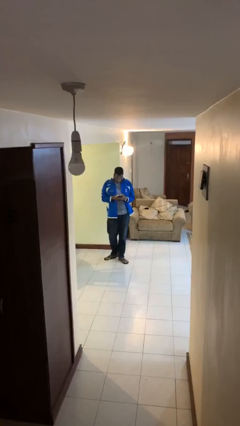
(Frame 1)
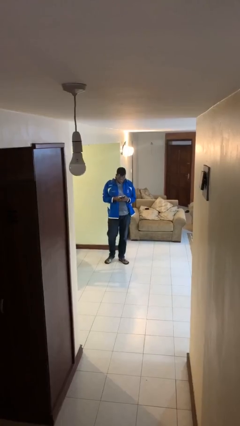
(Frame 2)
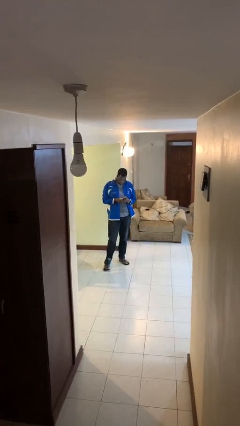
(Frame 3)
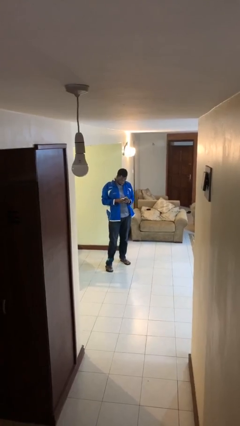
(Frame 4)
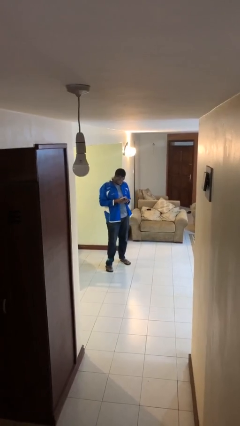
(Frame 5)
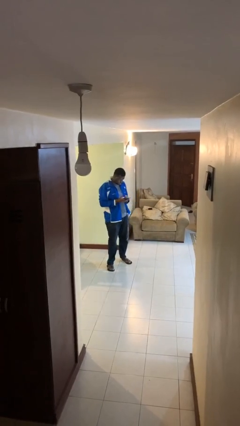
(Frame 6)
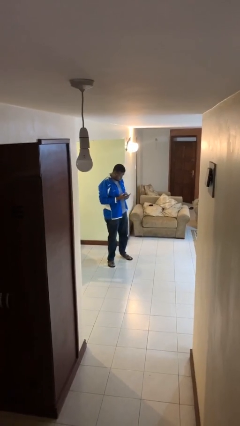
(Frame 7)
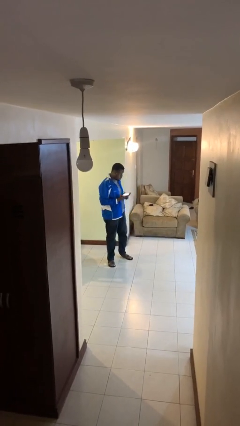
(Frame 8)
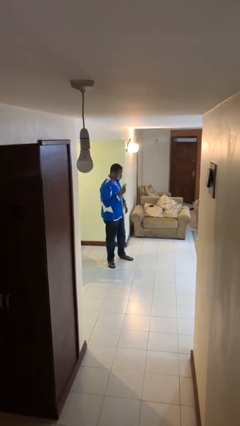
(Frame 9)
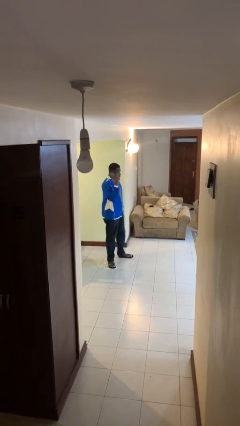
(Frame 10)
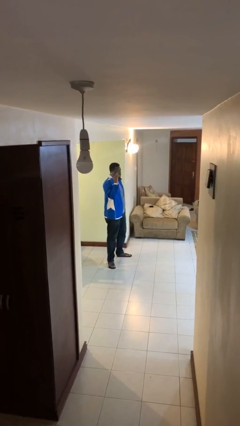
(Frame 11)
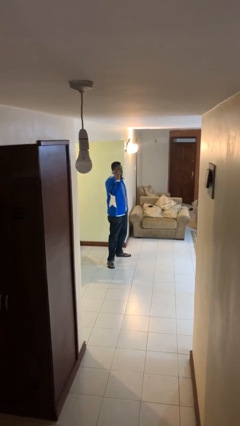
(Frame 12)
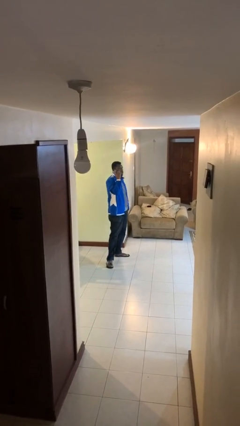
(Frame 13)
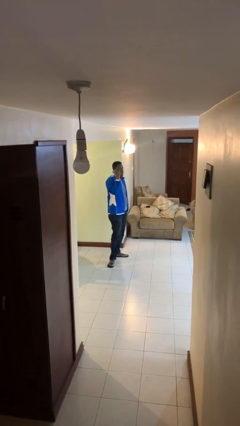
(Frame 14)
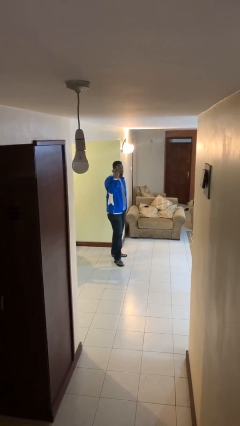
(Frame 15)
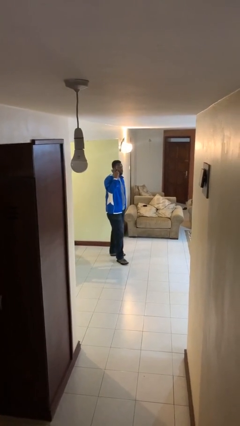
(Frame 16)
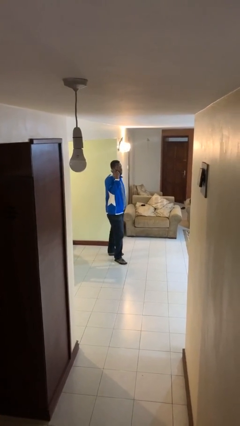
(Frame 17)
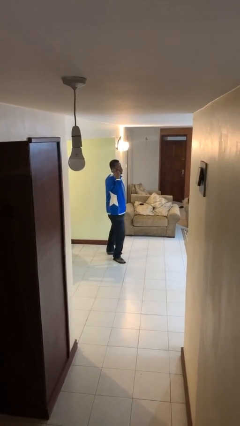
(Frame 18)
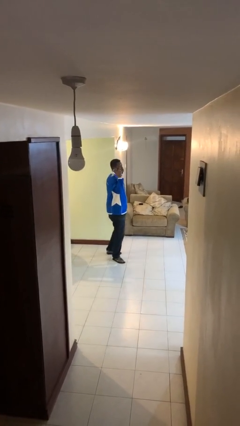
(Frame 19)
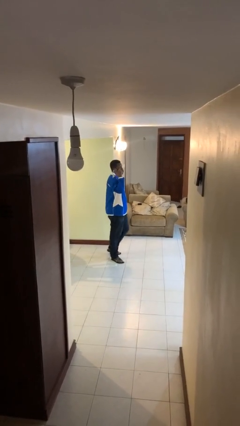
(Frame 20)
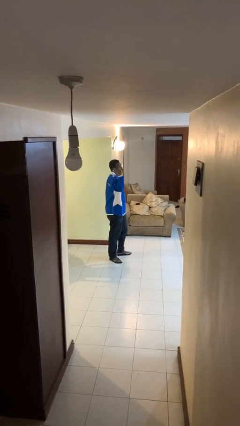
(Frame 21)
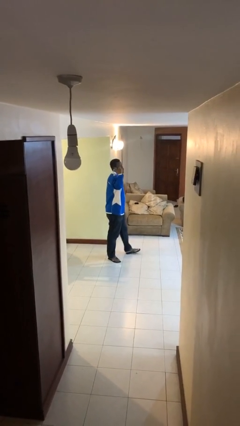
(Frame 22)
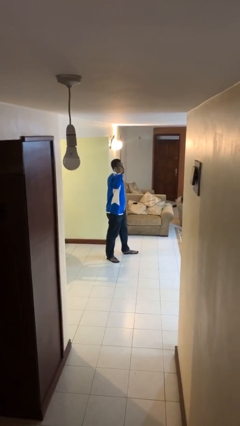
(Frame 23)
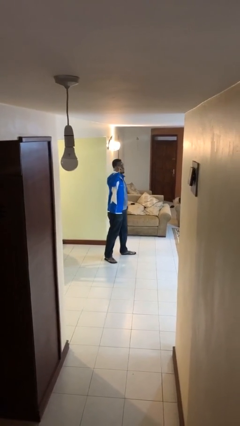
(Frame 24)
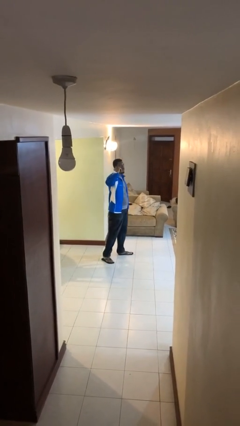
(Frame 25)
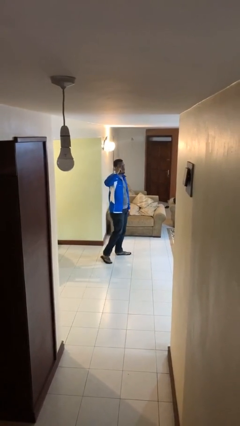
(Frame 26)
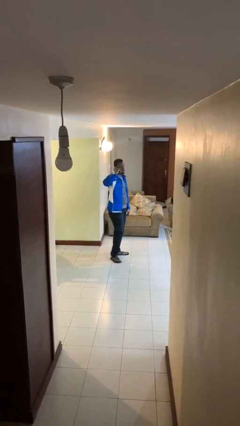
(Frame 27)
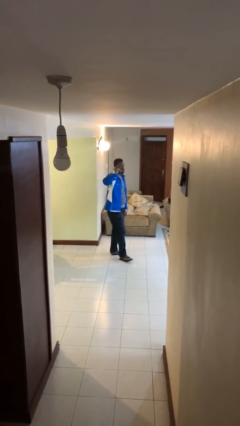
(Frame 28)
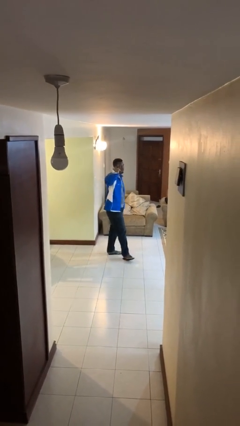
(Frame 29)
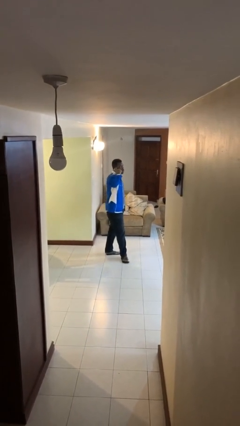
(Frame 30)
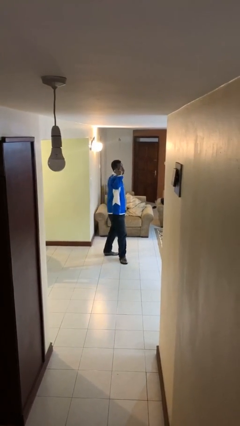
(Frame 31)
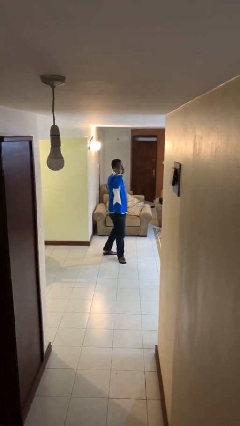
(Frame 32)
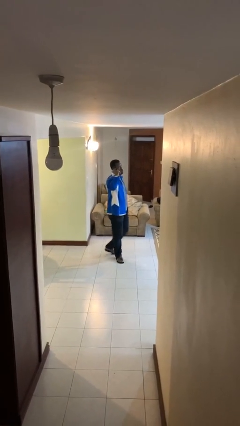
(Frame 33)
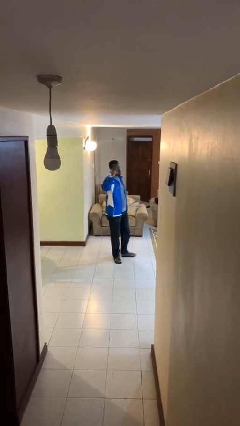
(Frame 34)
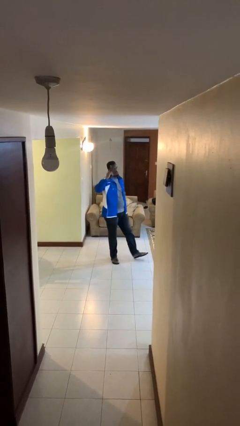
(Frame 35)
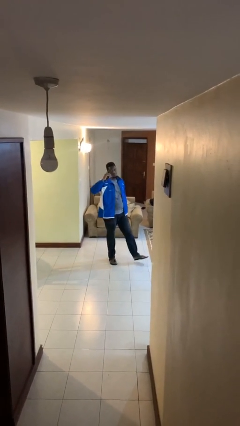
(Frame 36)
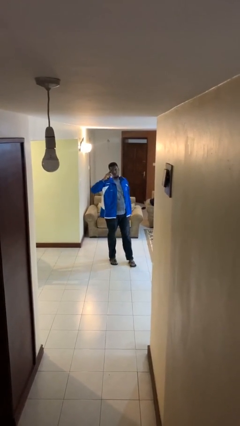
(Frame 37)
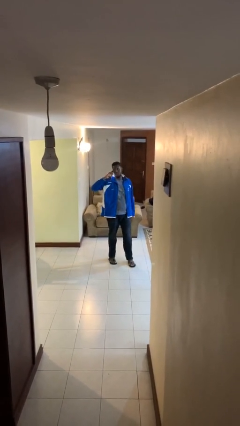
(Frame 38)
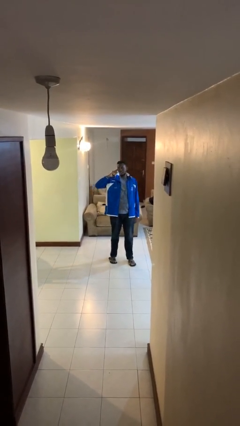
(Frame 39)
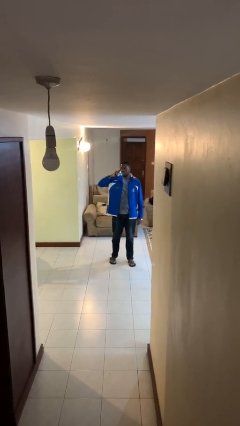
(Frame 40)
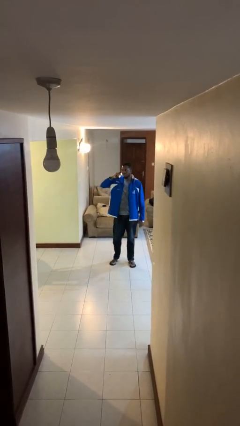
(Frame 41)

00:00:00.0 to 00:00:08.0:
person talks on phone

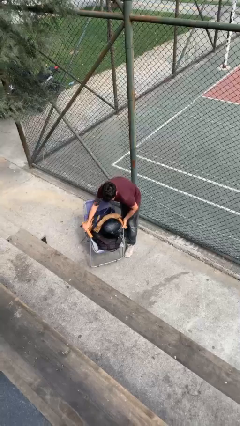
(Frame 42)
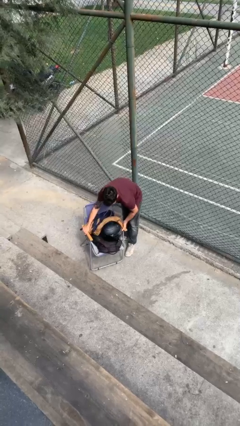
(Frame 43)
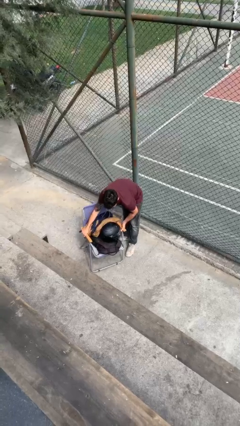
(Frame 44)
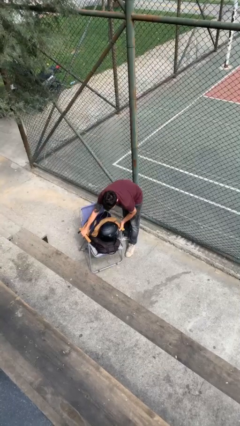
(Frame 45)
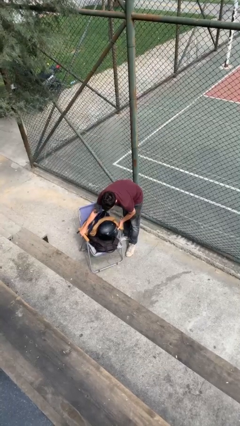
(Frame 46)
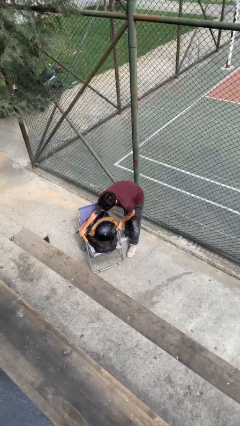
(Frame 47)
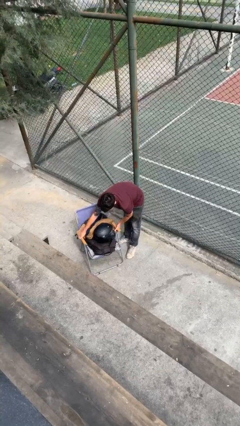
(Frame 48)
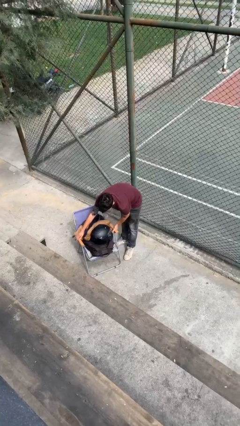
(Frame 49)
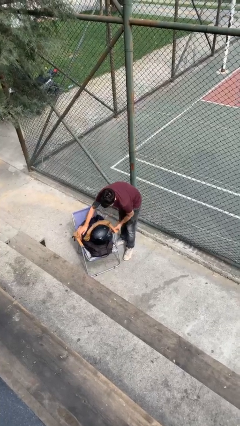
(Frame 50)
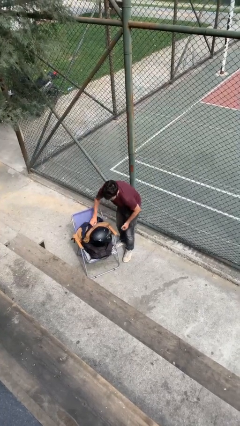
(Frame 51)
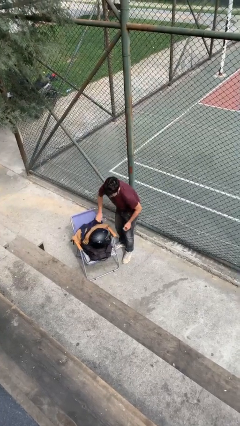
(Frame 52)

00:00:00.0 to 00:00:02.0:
person puts down object on floor

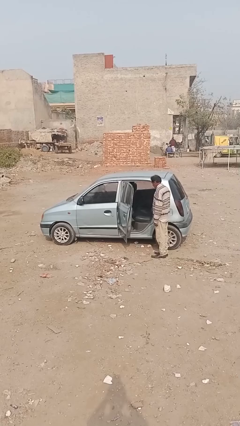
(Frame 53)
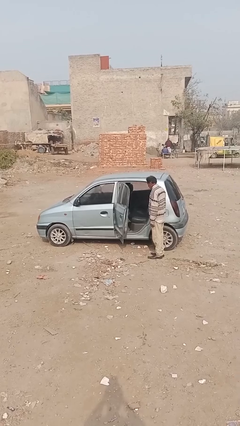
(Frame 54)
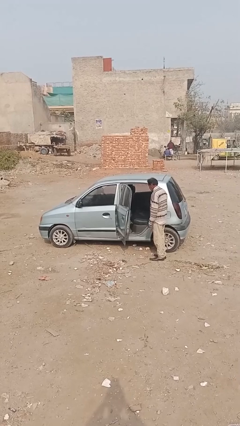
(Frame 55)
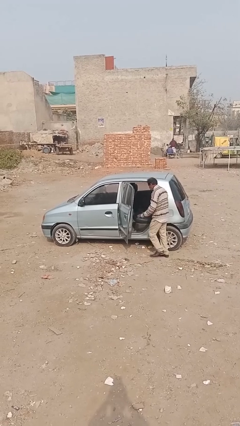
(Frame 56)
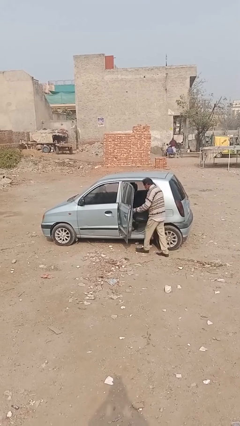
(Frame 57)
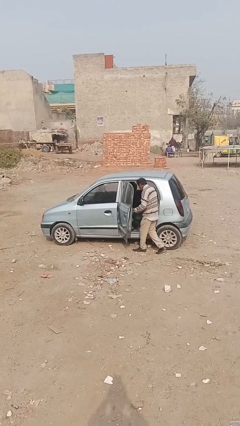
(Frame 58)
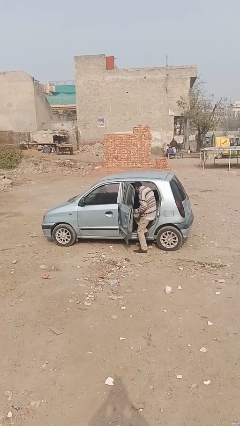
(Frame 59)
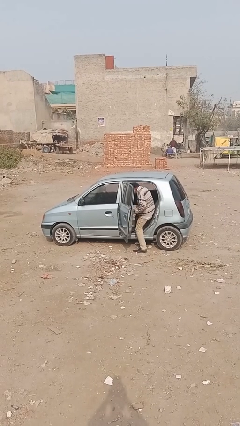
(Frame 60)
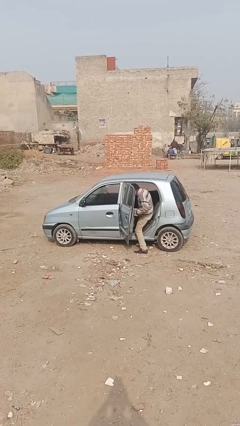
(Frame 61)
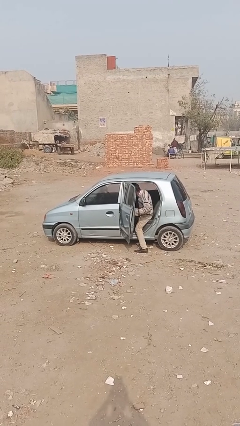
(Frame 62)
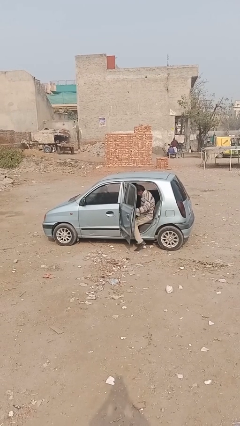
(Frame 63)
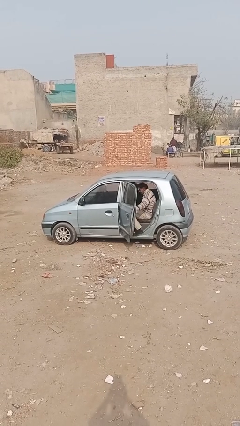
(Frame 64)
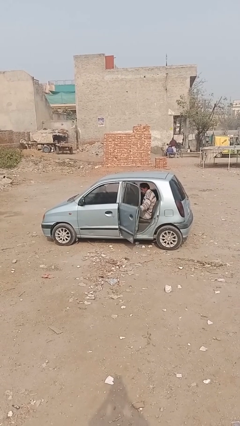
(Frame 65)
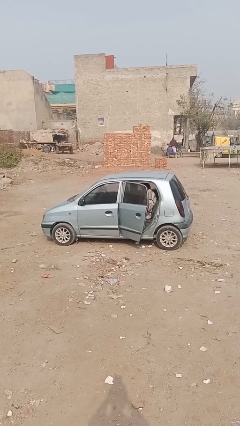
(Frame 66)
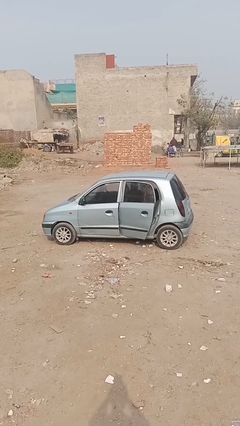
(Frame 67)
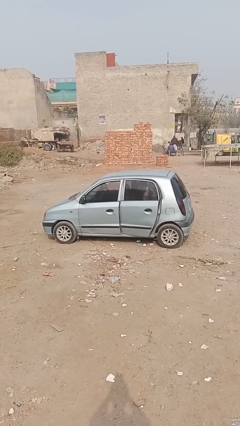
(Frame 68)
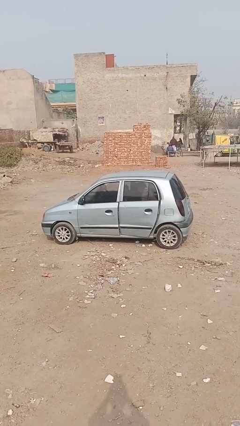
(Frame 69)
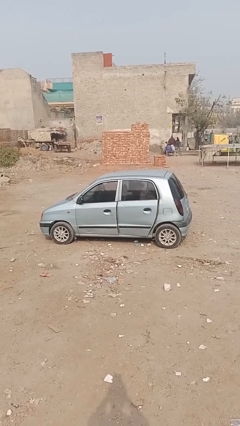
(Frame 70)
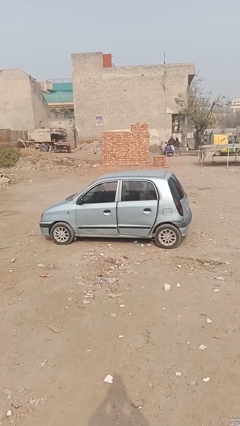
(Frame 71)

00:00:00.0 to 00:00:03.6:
car picks up person

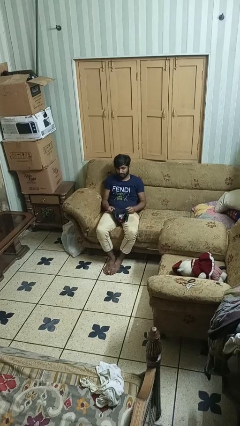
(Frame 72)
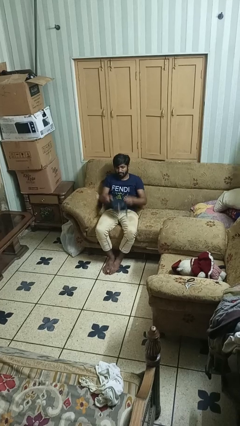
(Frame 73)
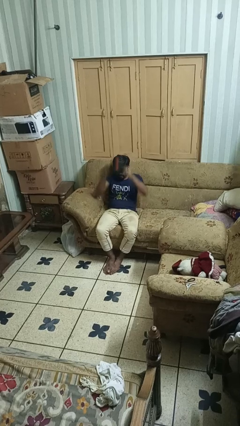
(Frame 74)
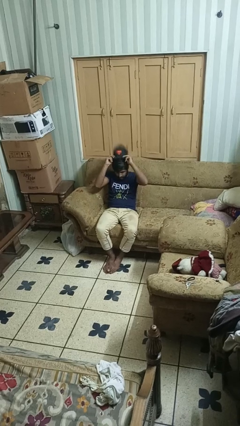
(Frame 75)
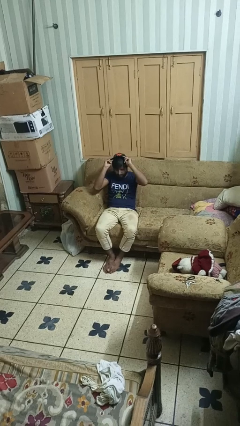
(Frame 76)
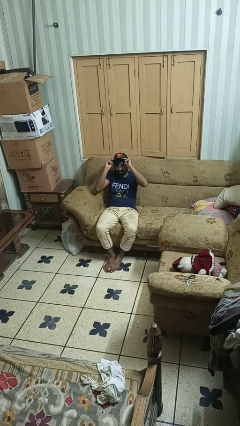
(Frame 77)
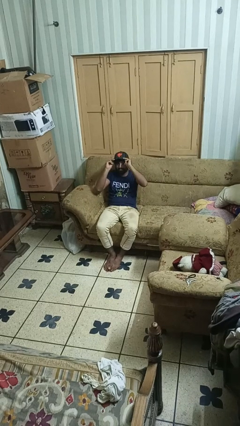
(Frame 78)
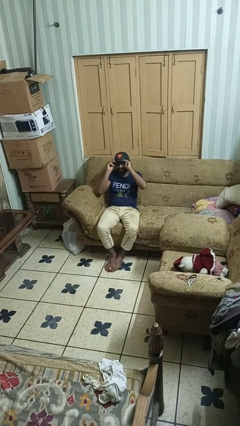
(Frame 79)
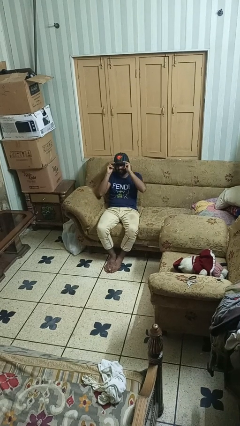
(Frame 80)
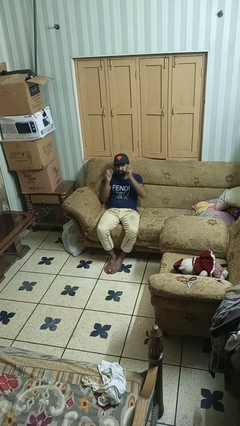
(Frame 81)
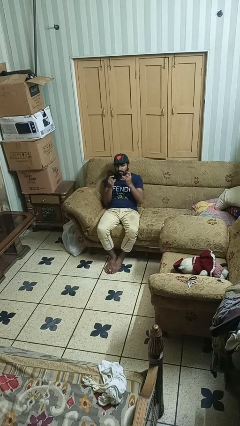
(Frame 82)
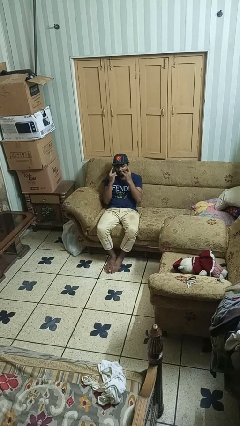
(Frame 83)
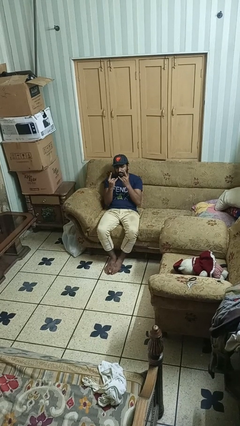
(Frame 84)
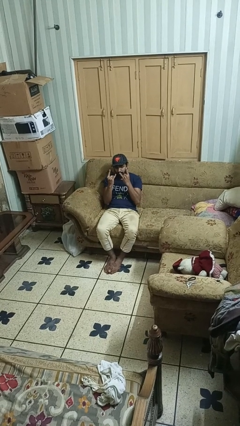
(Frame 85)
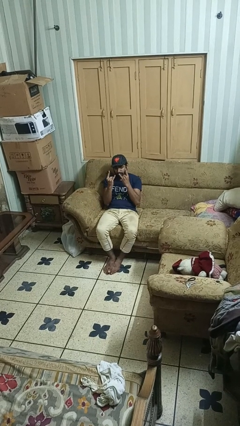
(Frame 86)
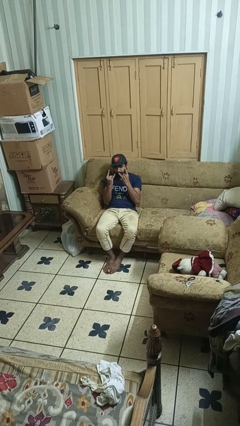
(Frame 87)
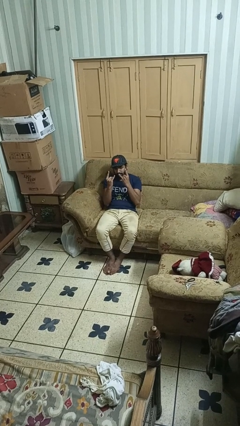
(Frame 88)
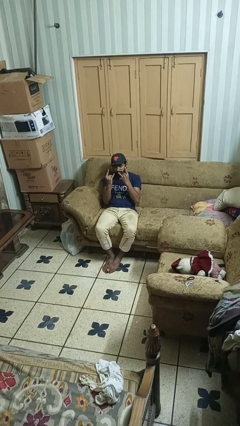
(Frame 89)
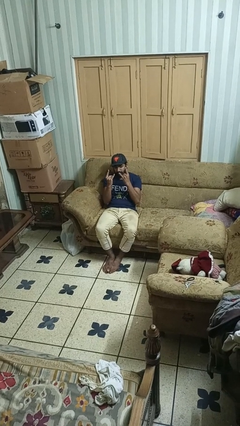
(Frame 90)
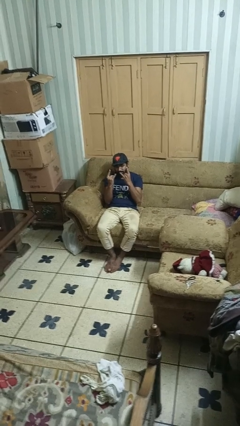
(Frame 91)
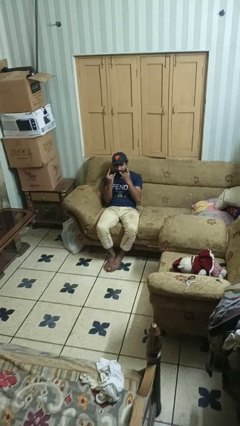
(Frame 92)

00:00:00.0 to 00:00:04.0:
person puts on hat
